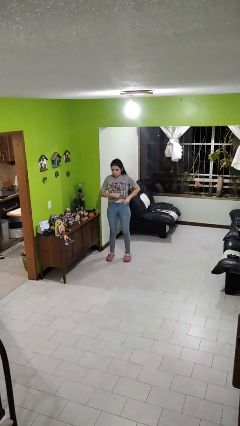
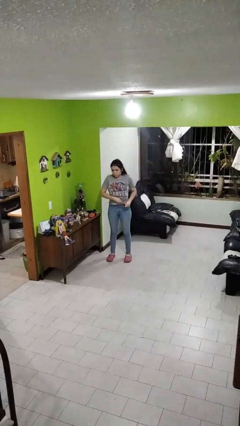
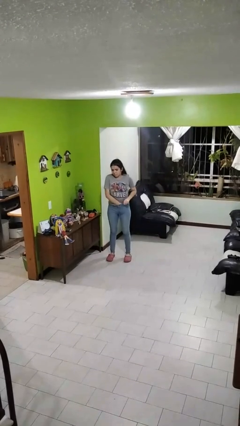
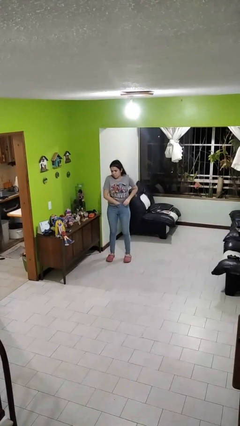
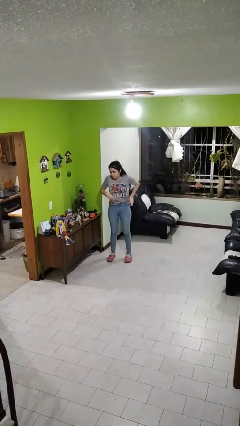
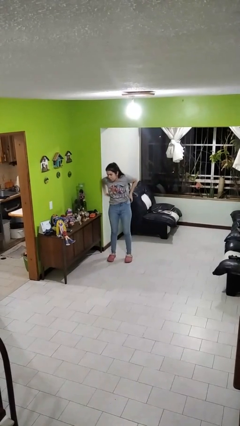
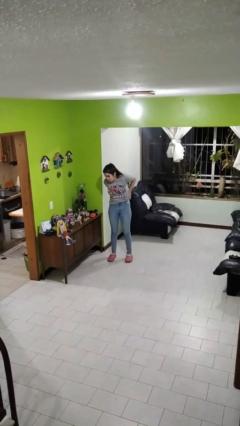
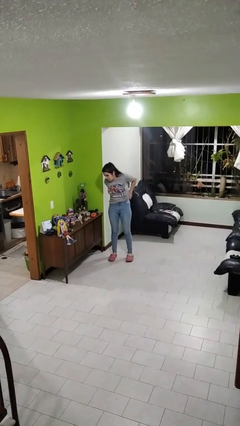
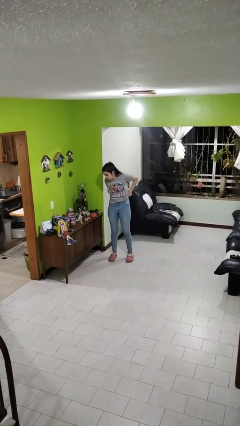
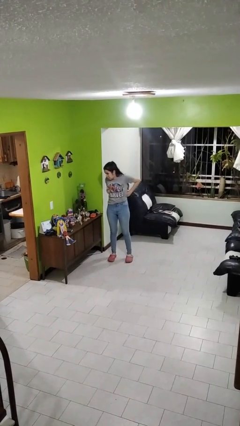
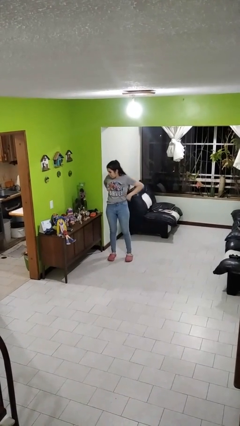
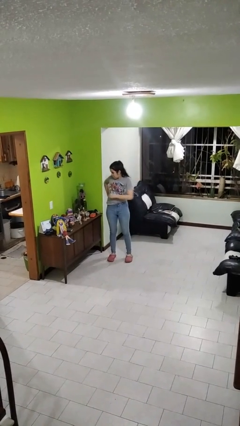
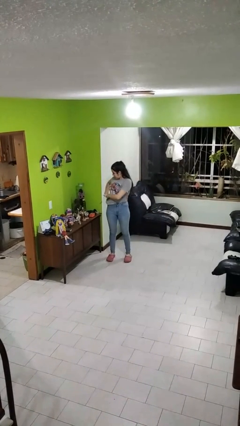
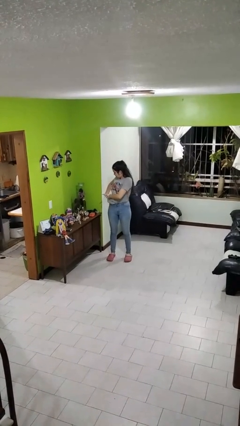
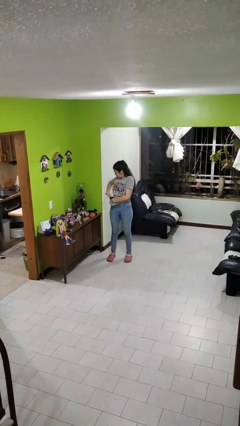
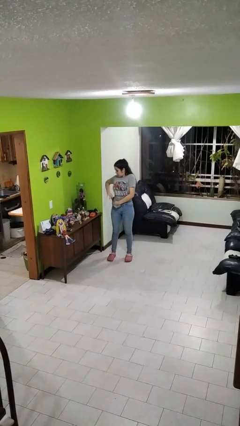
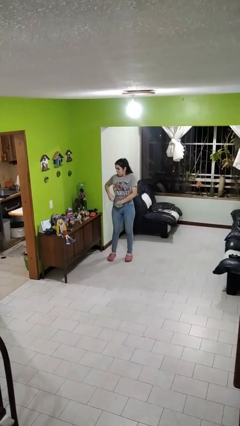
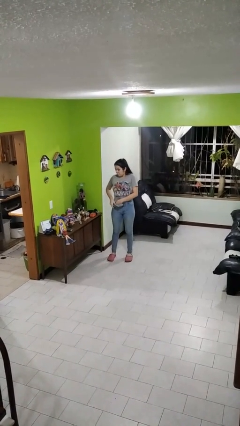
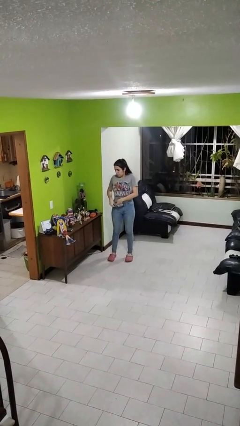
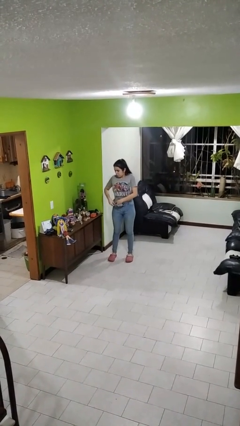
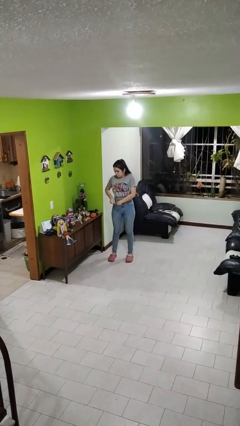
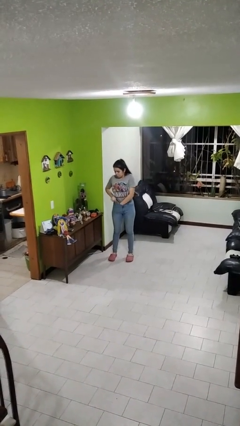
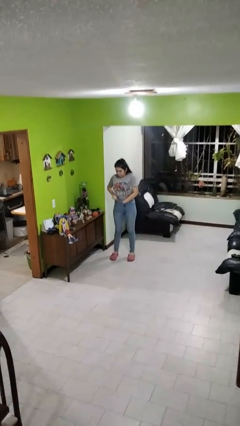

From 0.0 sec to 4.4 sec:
person tucks in shirt

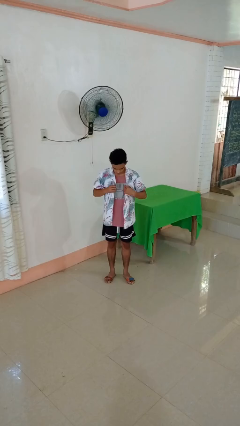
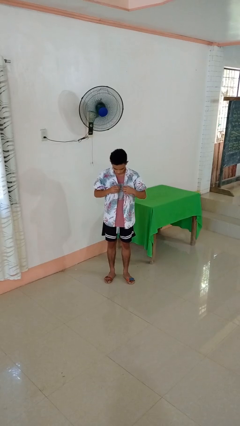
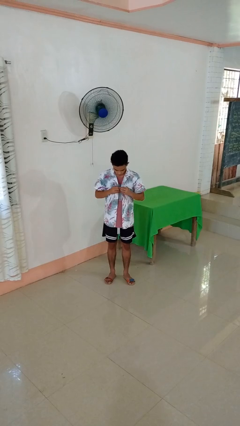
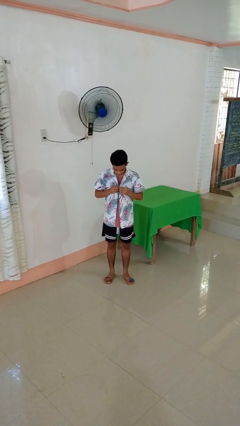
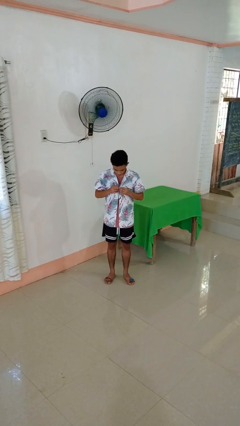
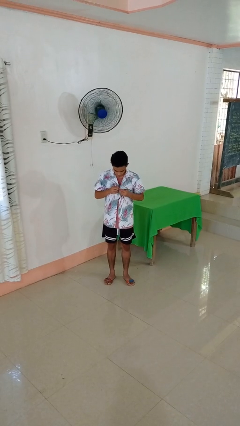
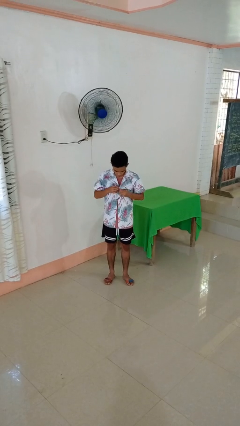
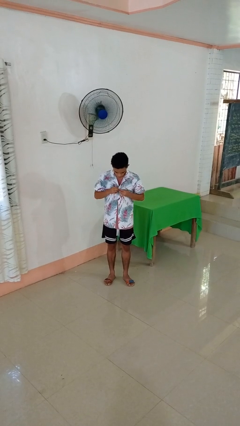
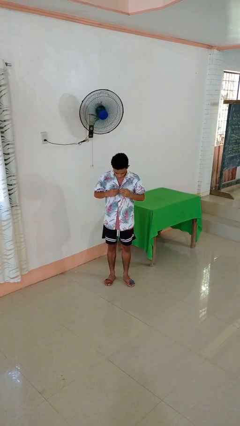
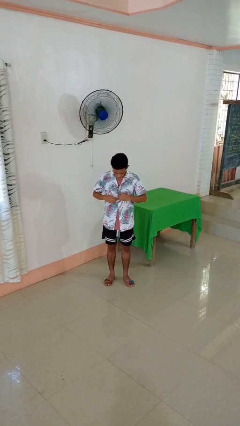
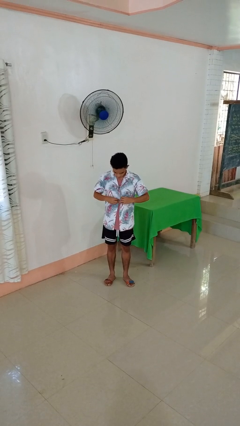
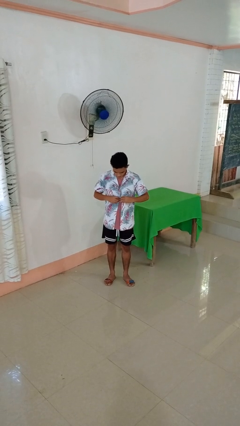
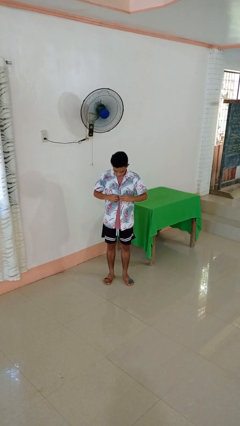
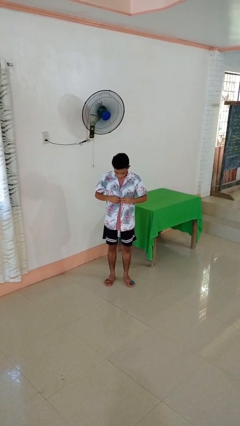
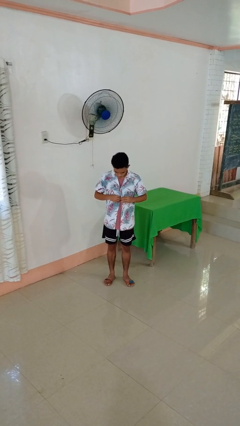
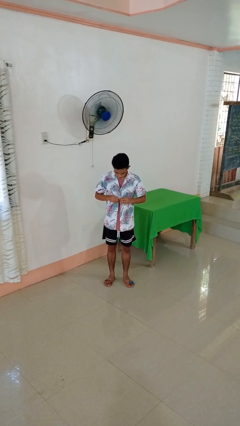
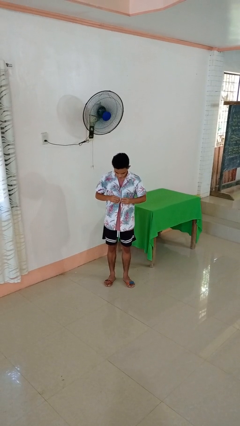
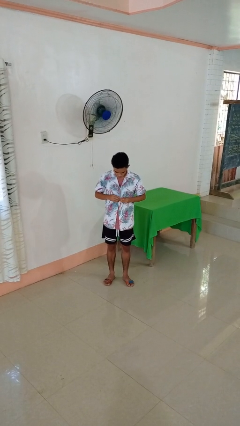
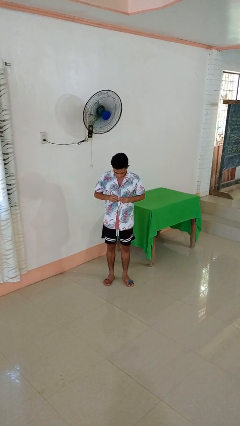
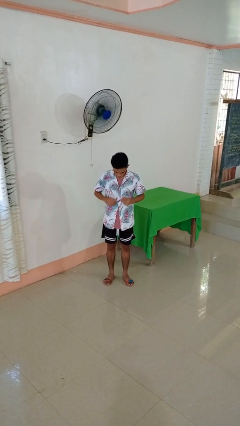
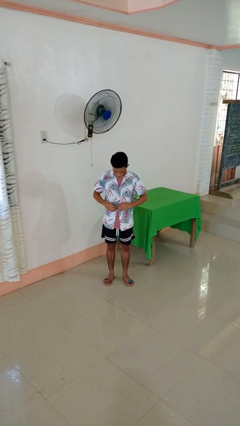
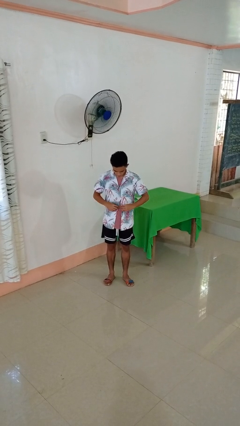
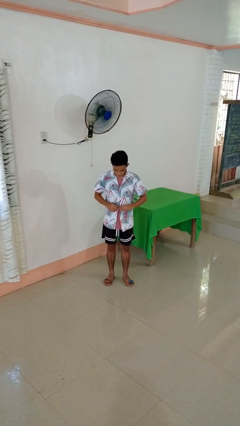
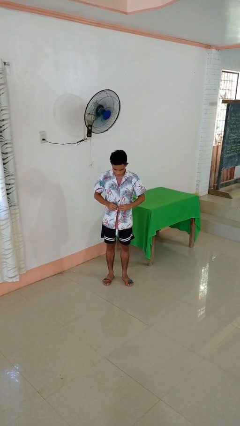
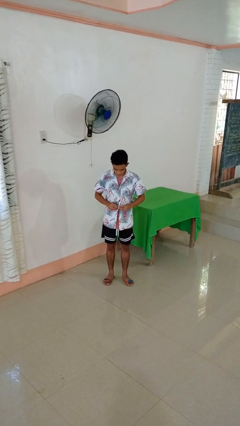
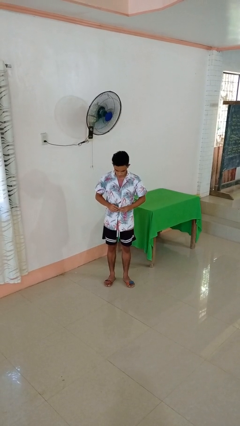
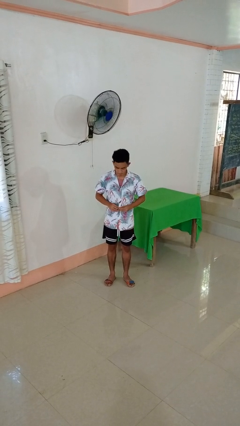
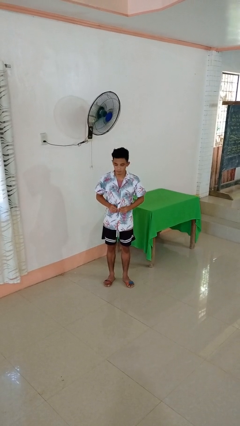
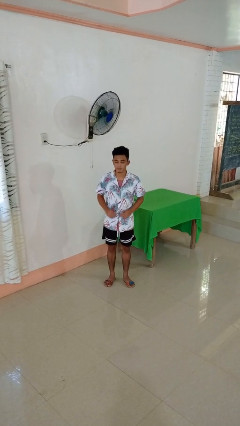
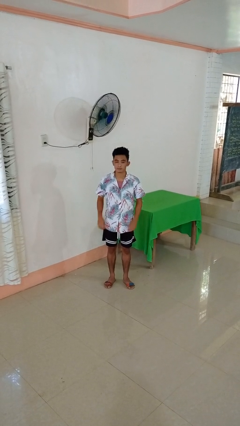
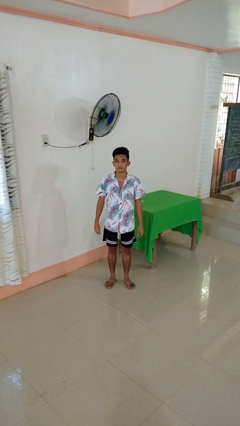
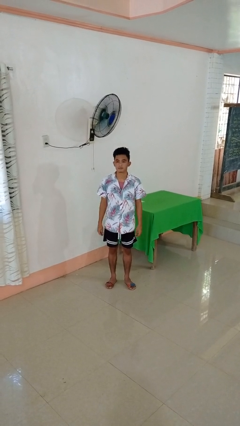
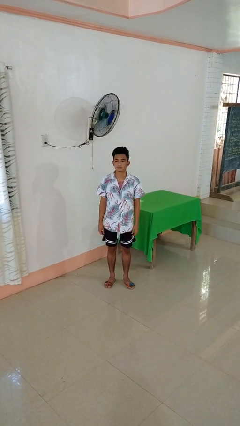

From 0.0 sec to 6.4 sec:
person buttons shirt

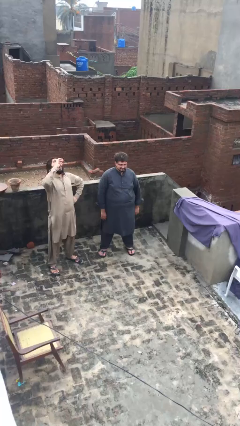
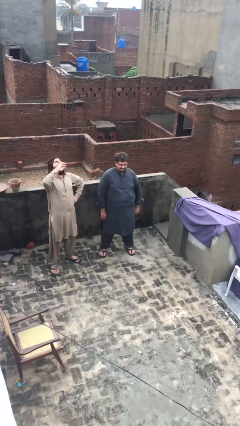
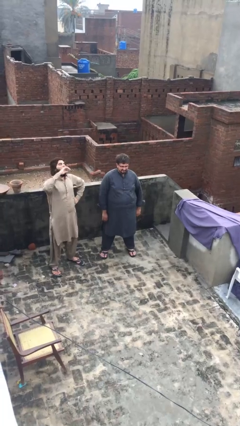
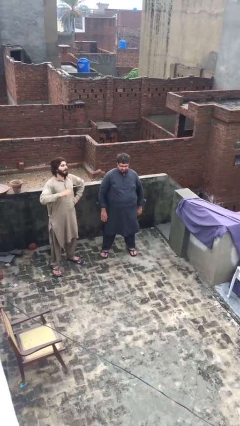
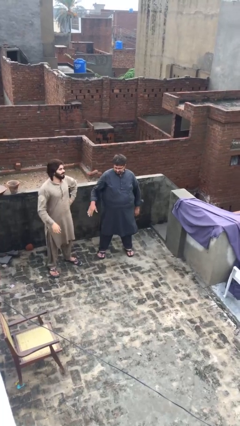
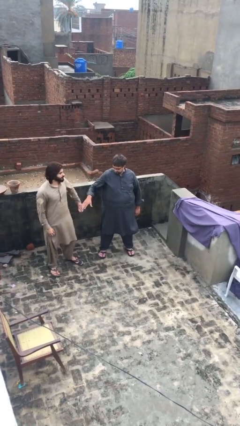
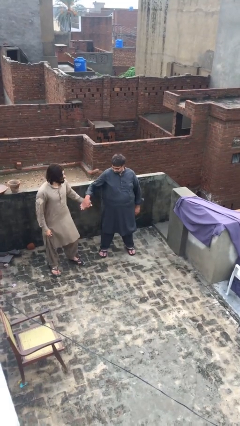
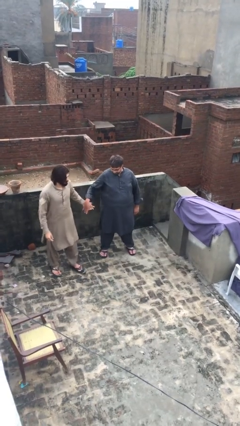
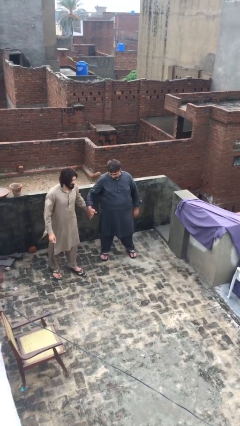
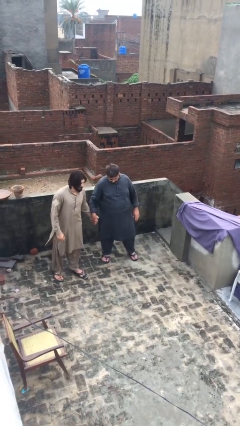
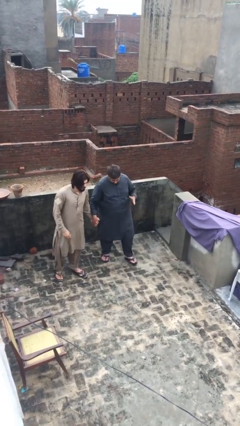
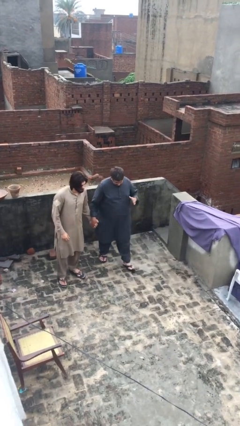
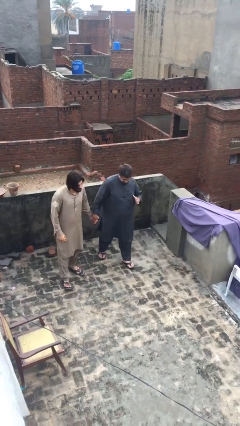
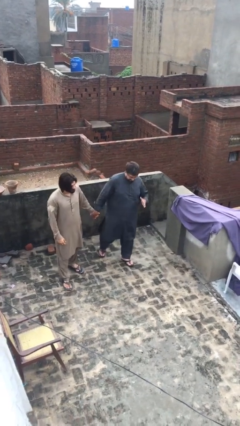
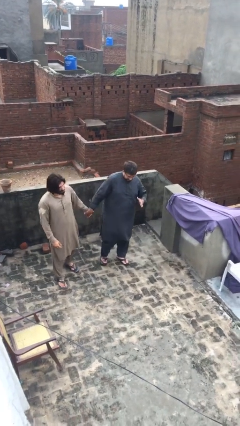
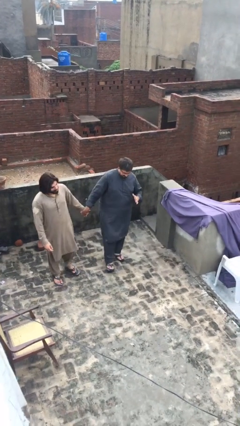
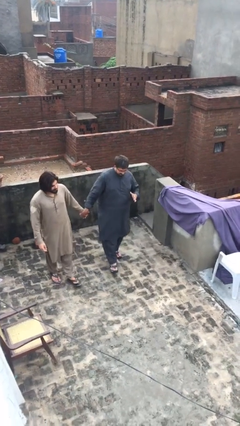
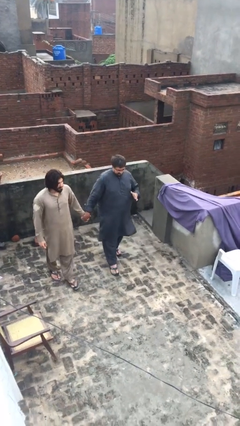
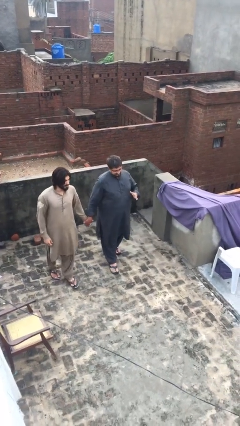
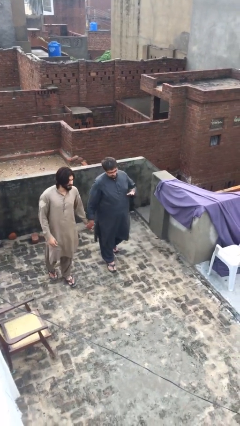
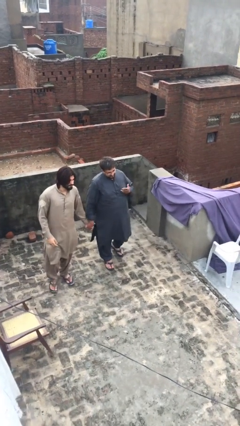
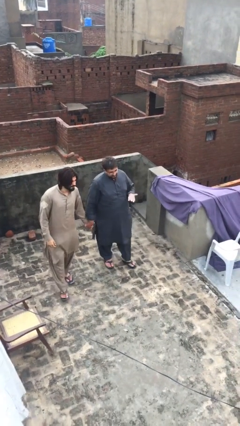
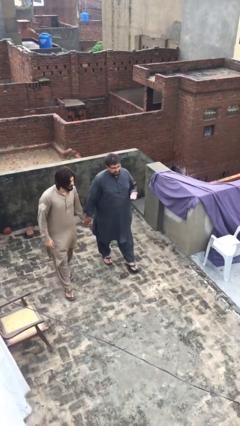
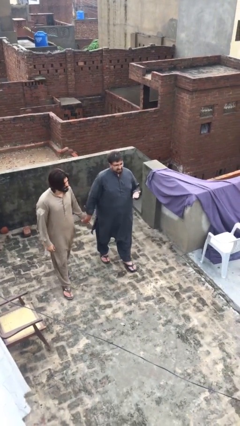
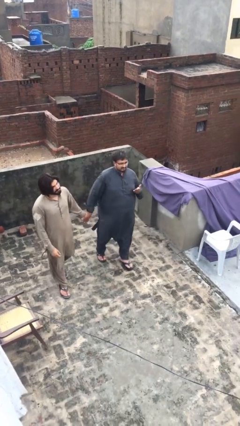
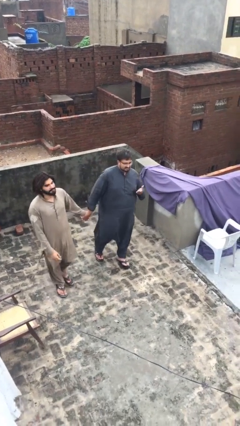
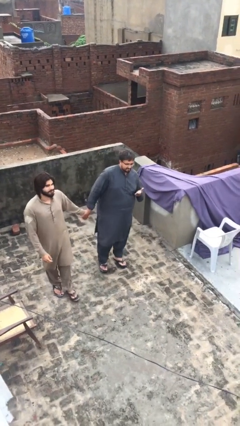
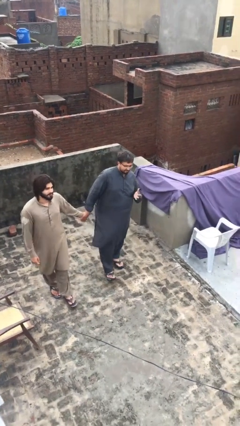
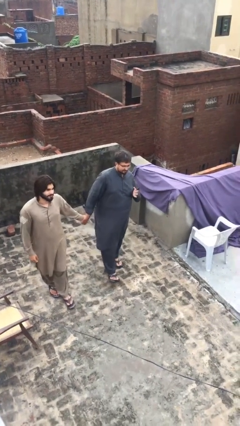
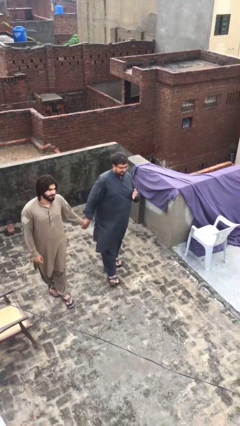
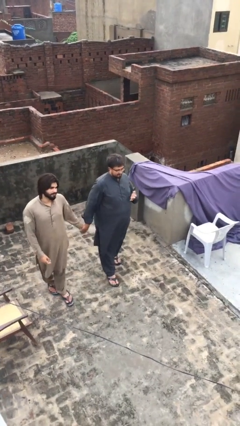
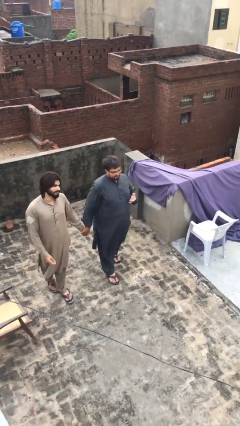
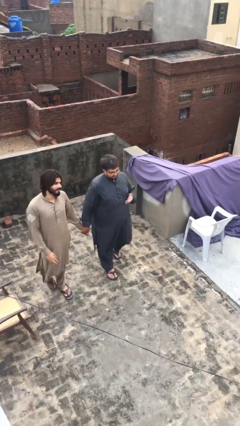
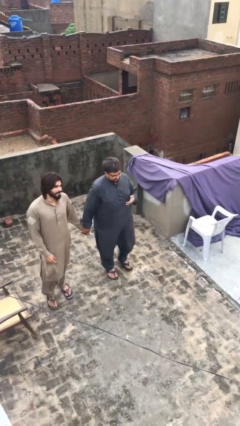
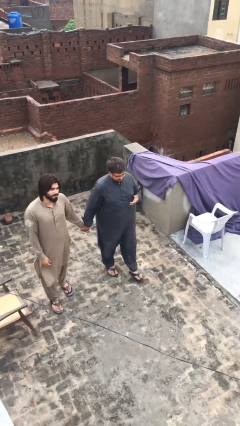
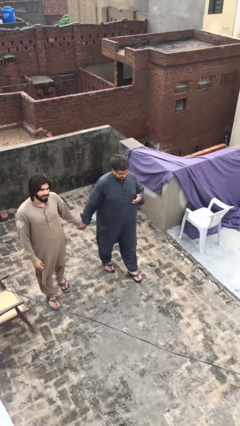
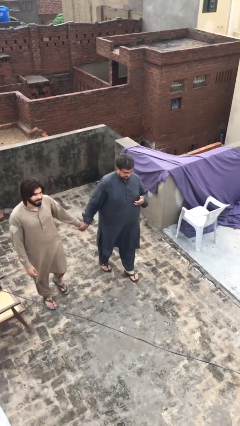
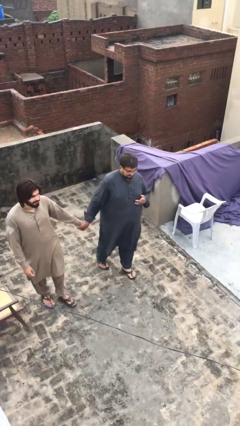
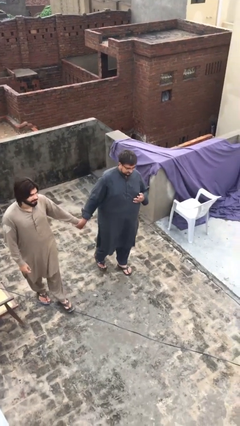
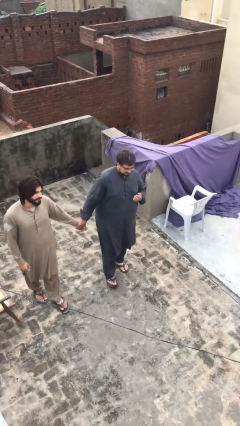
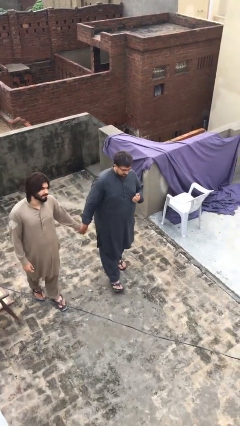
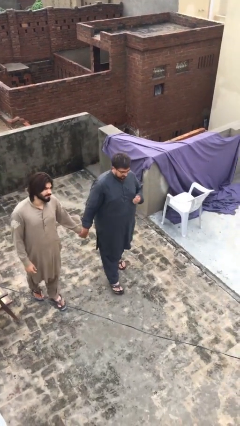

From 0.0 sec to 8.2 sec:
person holds hand
